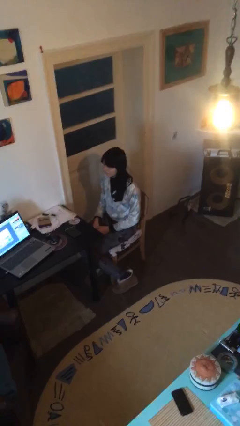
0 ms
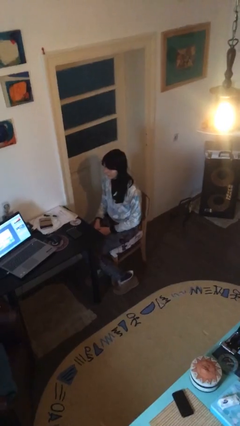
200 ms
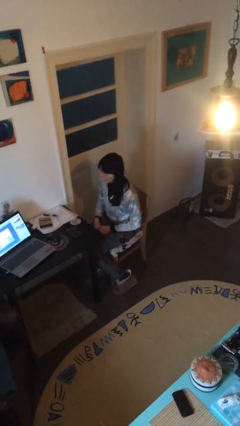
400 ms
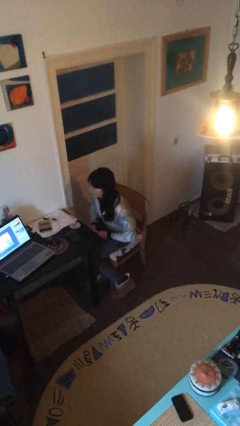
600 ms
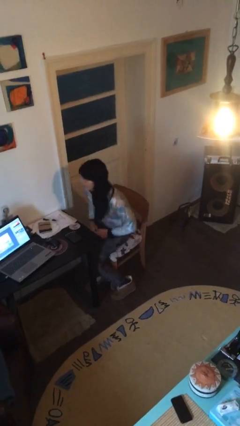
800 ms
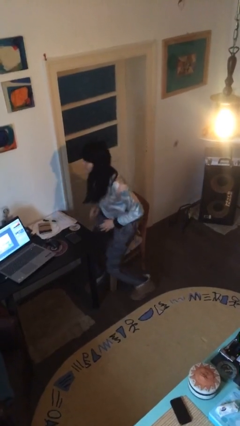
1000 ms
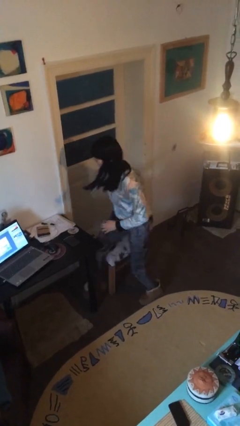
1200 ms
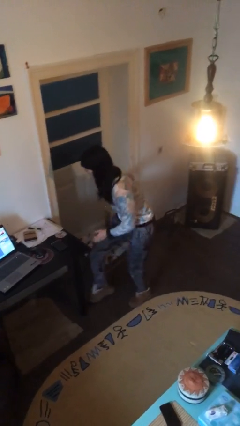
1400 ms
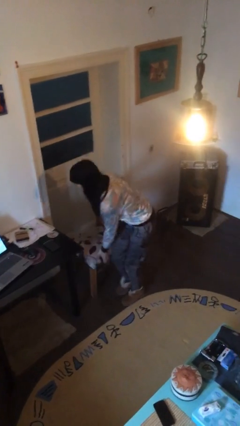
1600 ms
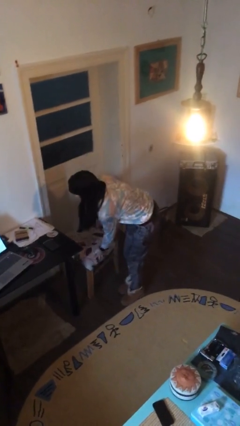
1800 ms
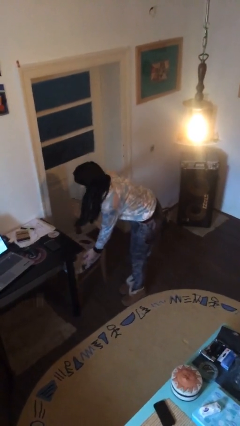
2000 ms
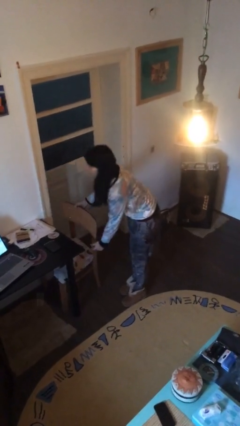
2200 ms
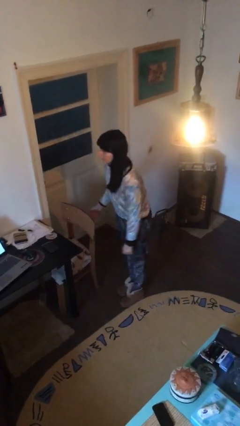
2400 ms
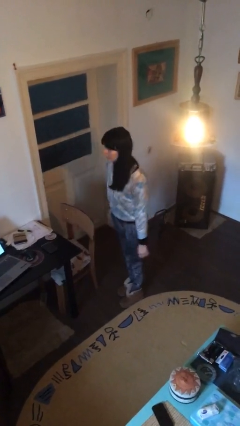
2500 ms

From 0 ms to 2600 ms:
person stands up

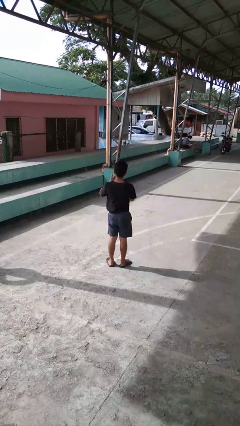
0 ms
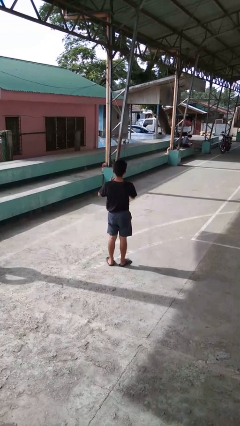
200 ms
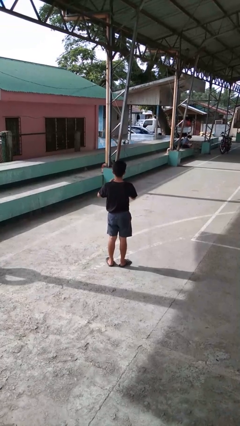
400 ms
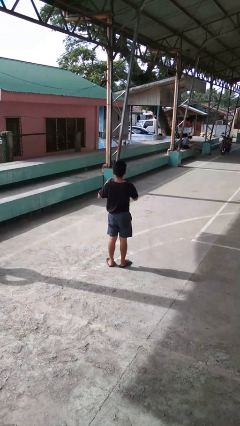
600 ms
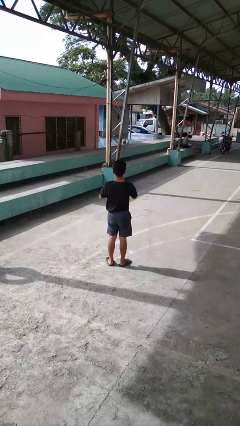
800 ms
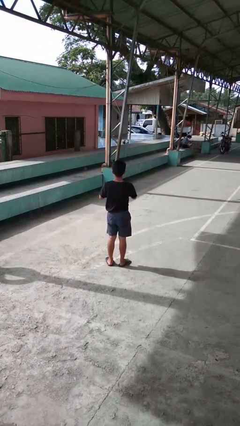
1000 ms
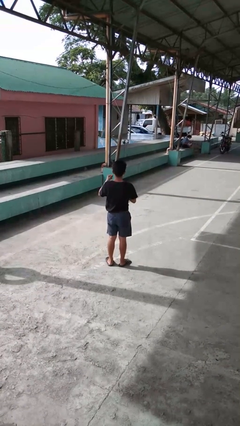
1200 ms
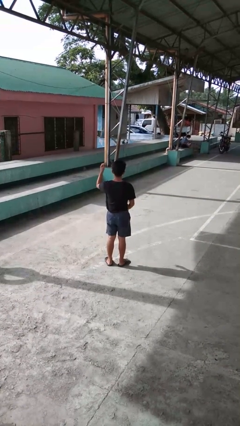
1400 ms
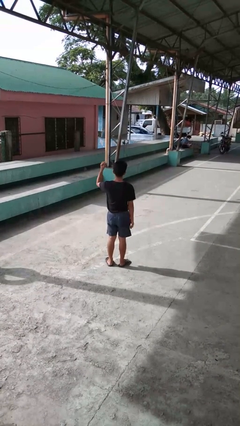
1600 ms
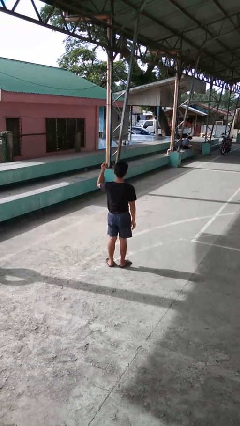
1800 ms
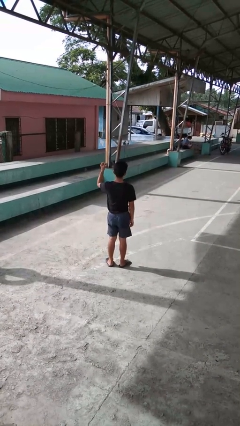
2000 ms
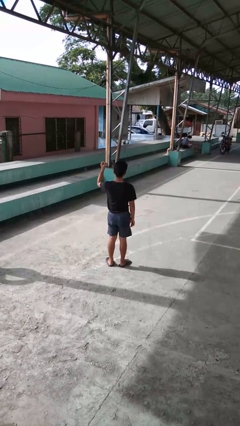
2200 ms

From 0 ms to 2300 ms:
person takes off ring

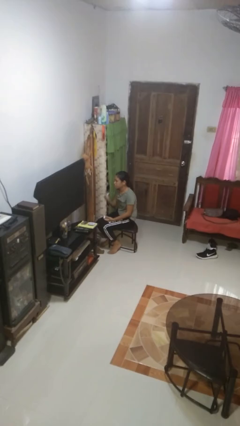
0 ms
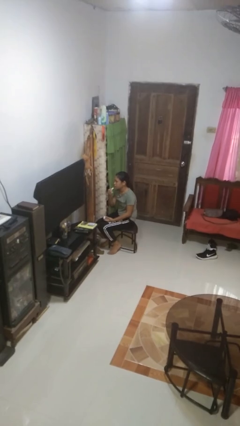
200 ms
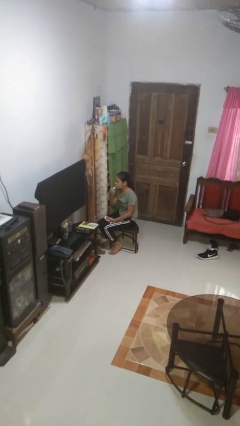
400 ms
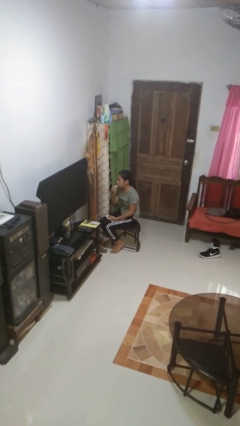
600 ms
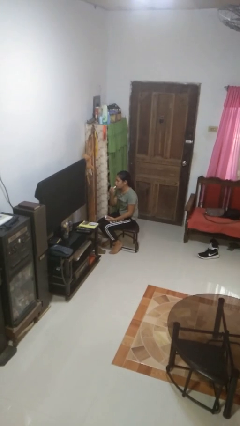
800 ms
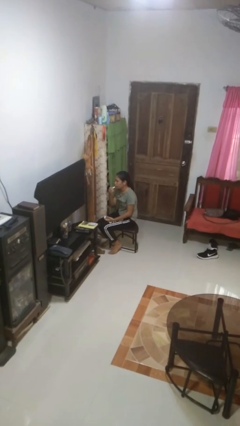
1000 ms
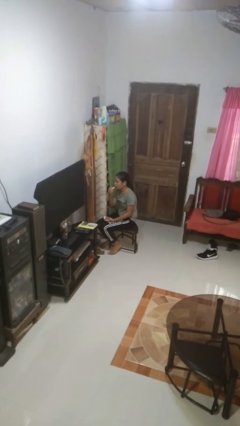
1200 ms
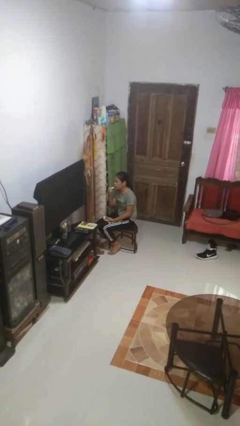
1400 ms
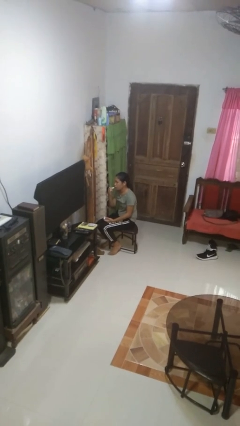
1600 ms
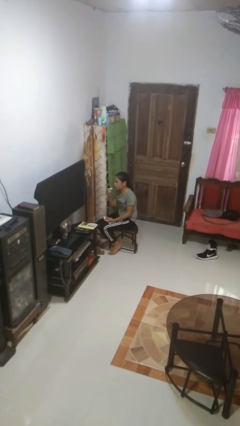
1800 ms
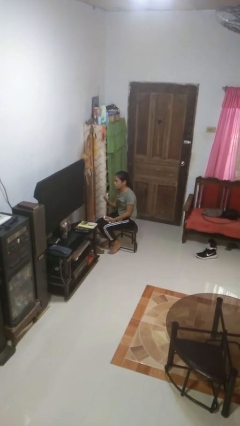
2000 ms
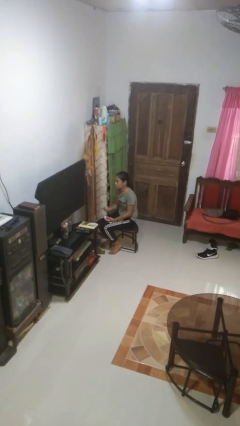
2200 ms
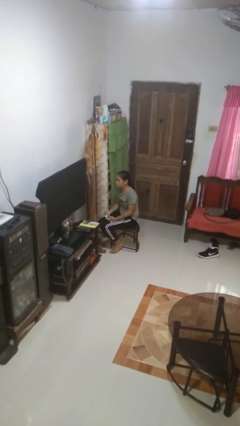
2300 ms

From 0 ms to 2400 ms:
person applies lip makeup

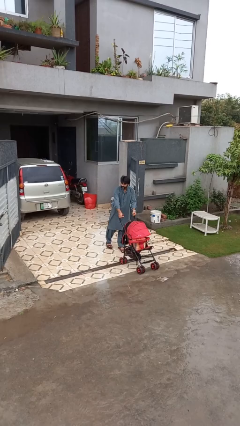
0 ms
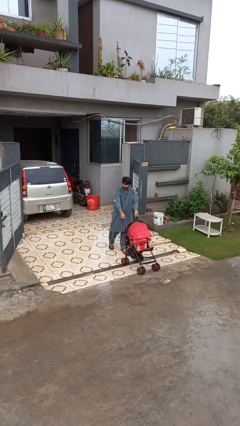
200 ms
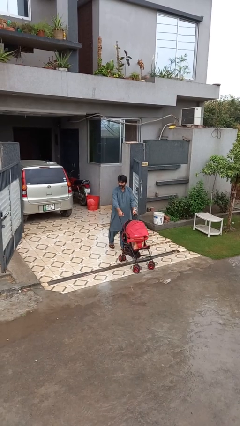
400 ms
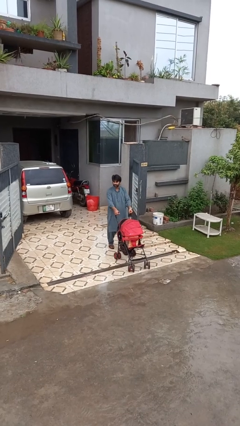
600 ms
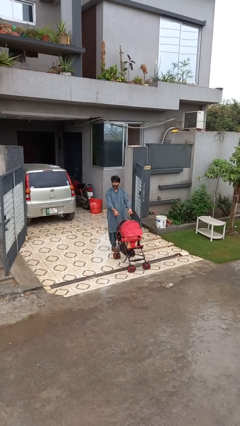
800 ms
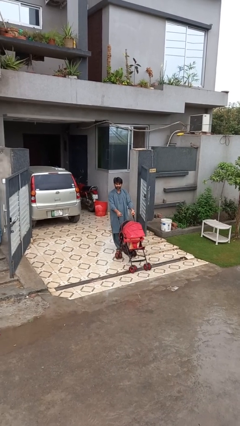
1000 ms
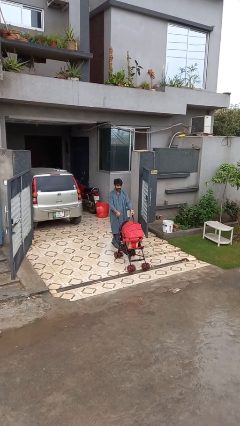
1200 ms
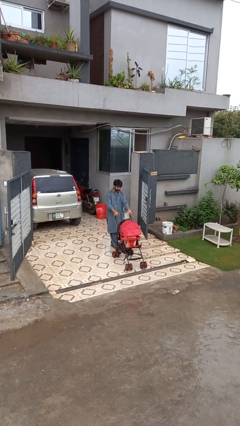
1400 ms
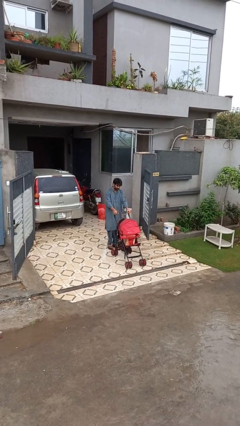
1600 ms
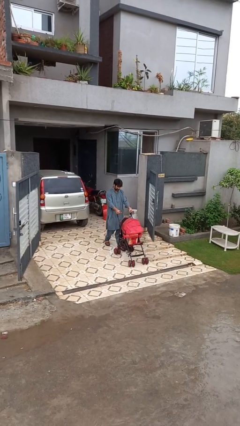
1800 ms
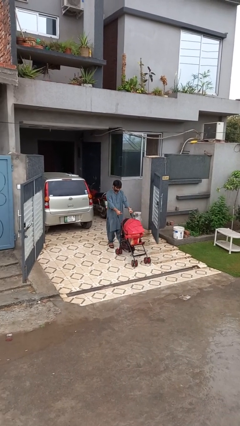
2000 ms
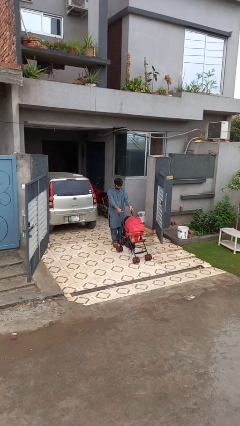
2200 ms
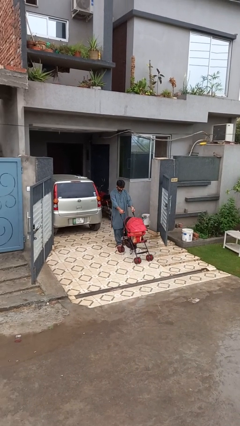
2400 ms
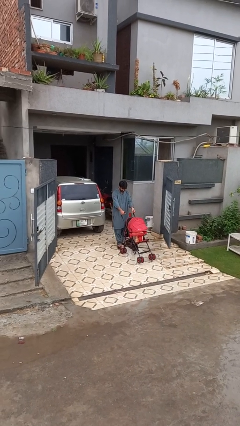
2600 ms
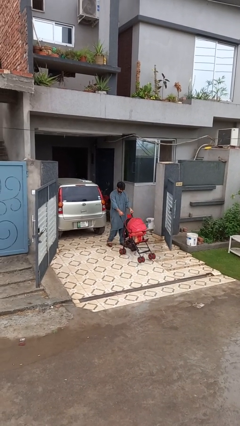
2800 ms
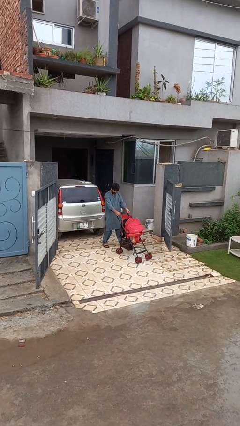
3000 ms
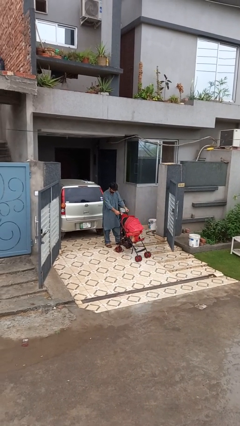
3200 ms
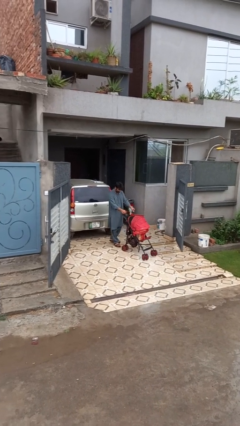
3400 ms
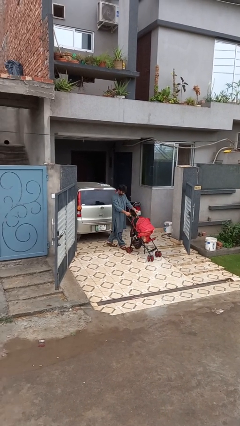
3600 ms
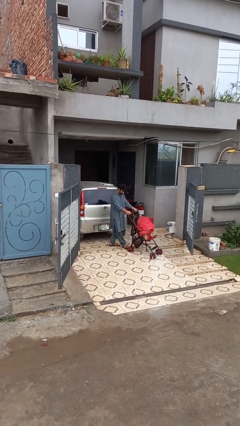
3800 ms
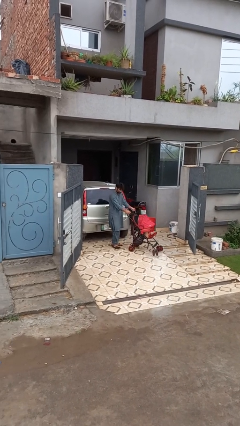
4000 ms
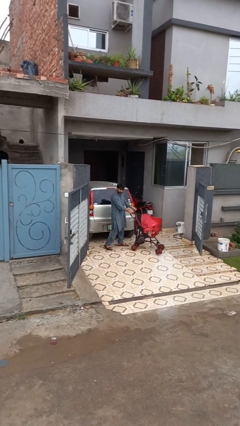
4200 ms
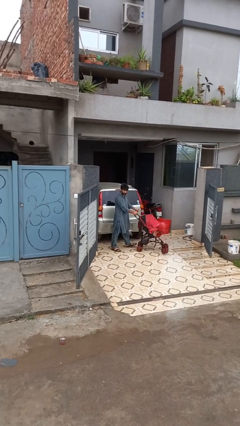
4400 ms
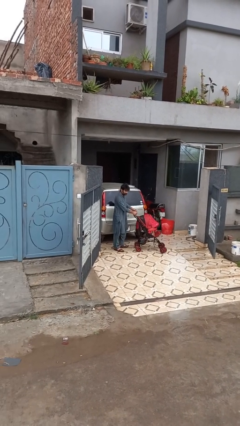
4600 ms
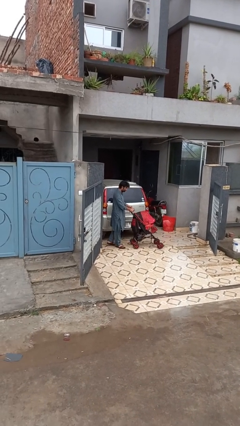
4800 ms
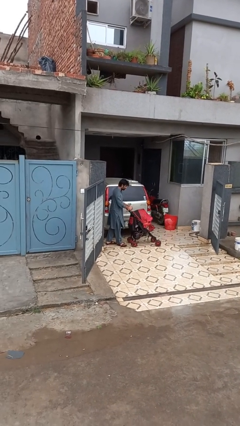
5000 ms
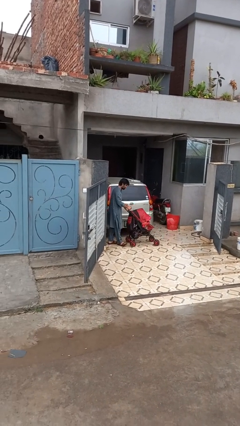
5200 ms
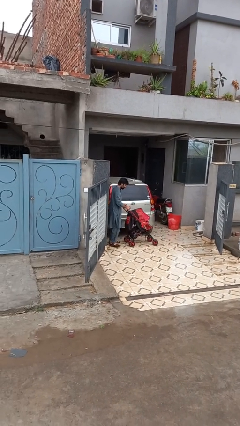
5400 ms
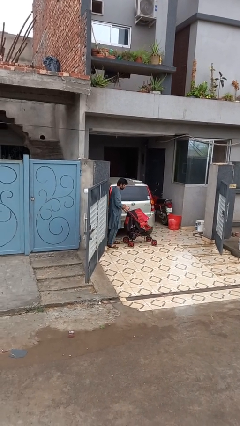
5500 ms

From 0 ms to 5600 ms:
person pulls wheeled cart

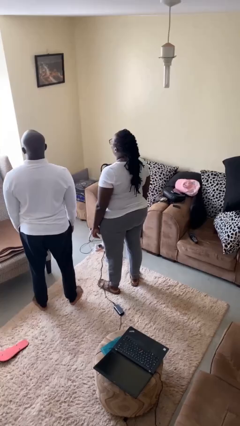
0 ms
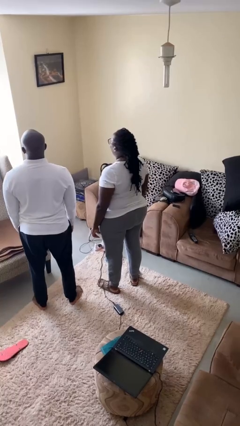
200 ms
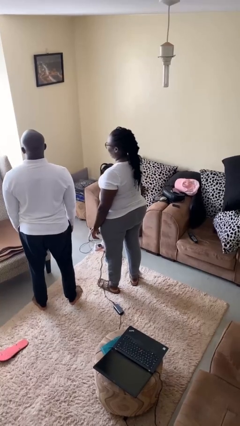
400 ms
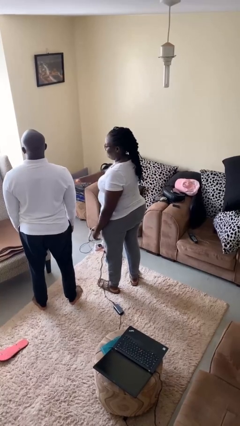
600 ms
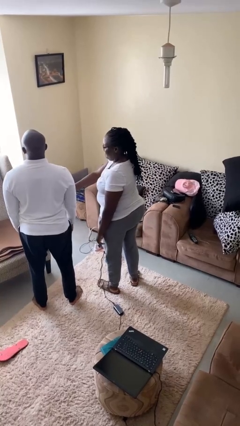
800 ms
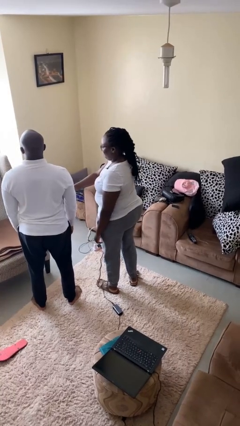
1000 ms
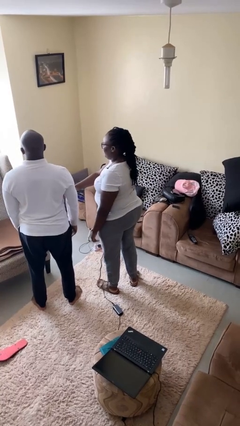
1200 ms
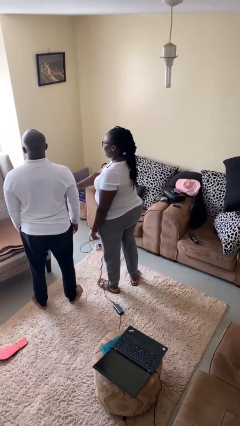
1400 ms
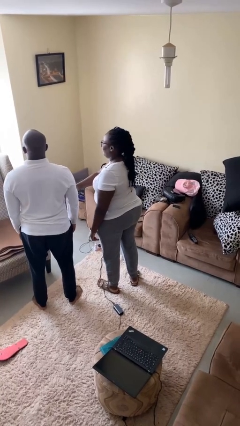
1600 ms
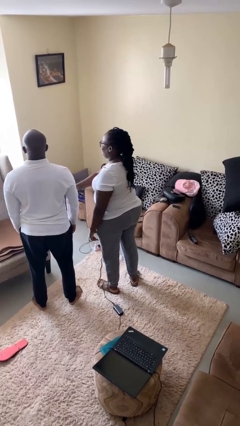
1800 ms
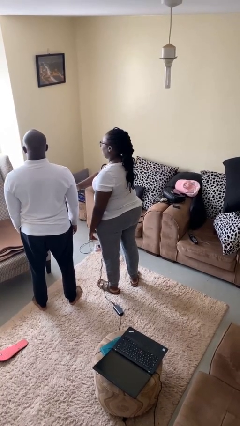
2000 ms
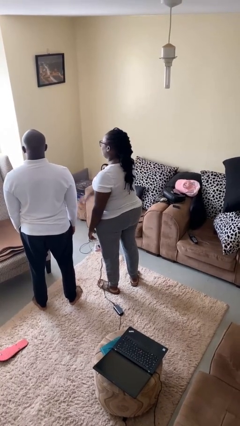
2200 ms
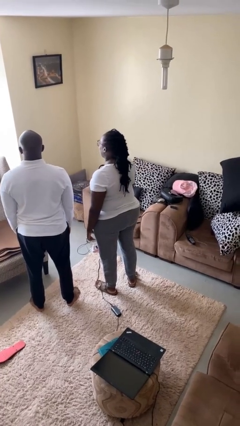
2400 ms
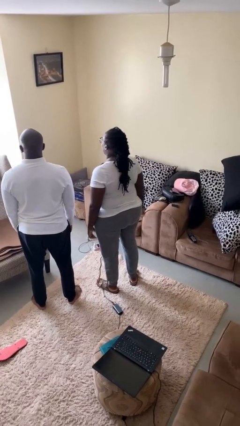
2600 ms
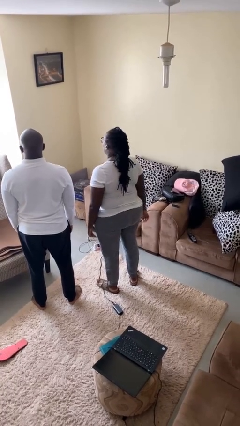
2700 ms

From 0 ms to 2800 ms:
person grabs person by bicep

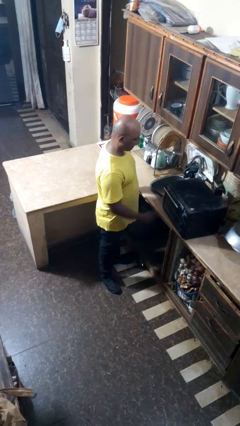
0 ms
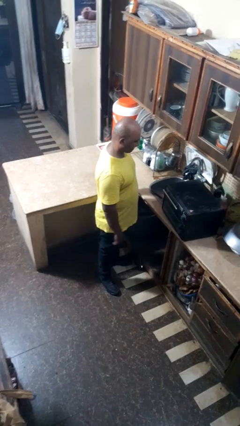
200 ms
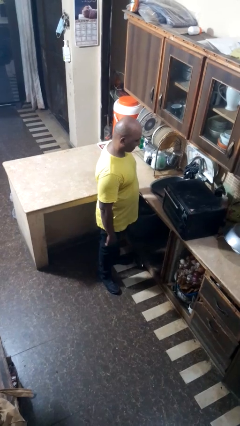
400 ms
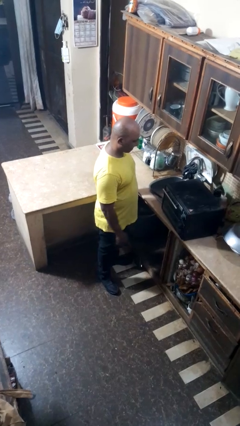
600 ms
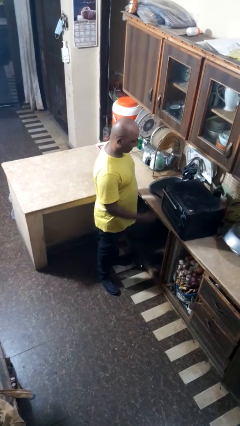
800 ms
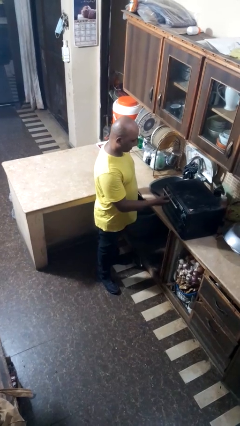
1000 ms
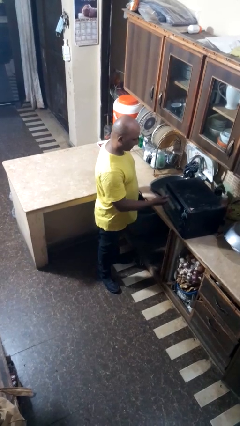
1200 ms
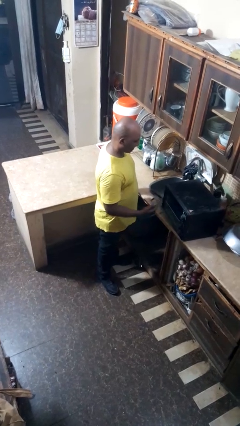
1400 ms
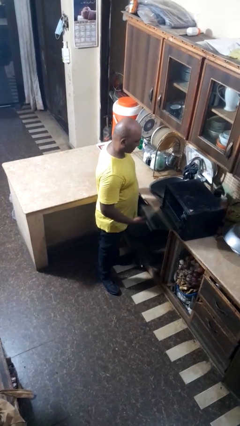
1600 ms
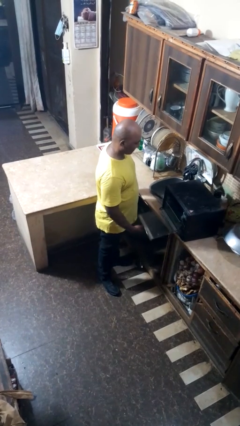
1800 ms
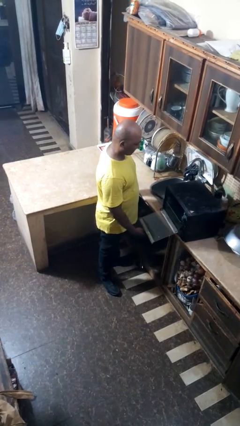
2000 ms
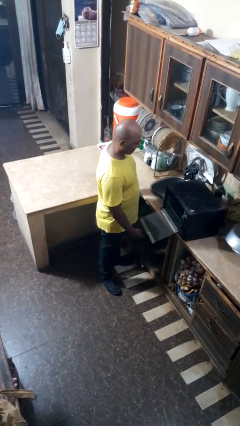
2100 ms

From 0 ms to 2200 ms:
person opens oven door
